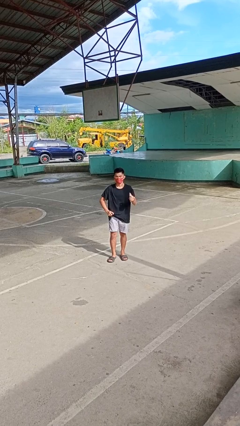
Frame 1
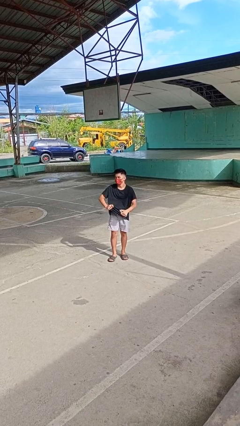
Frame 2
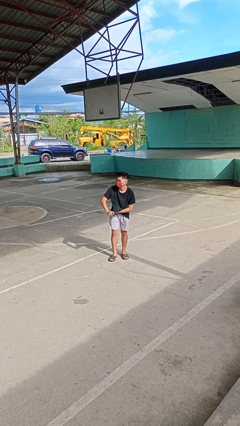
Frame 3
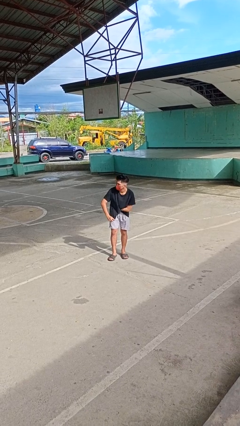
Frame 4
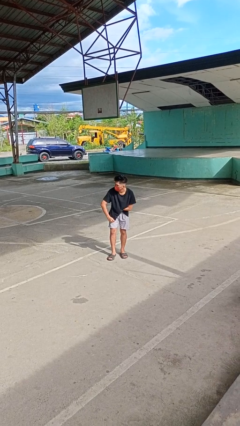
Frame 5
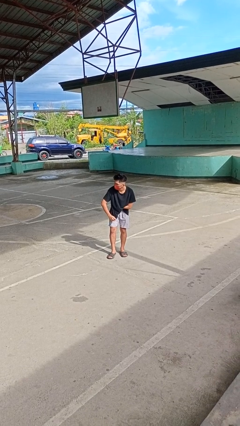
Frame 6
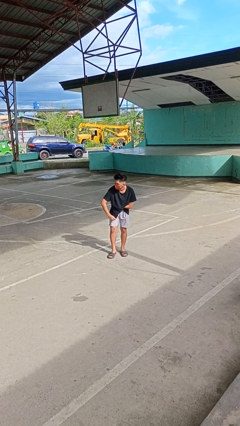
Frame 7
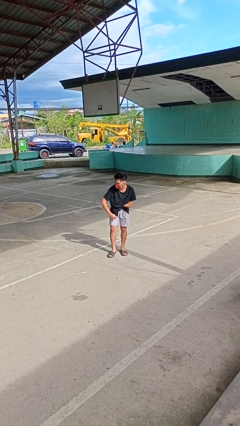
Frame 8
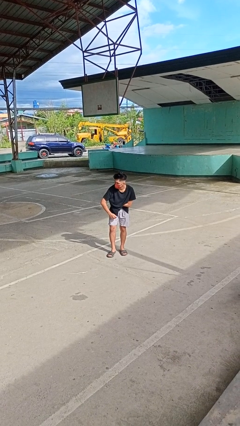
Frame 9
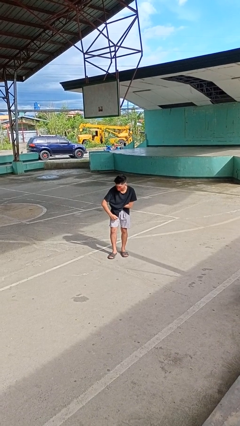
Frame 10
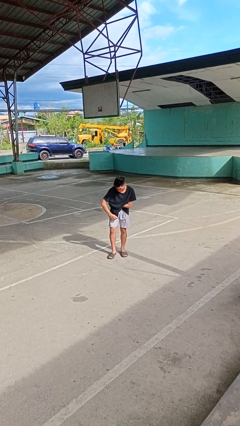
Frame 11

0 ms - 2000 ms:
person applies deodorant

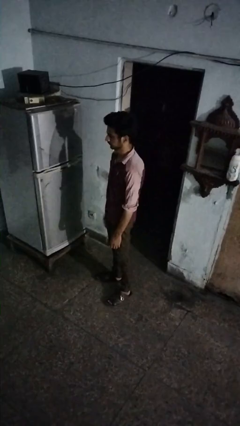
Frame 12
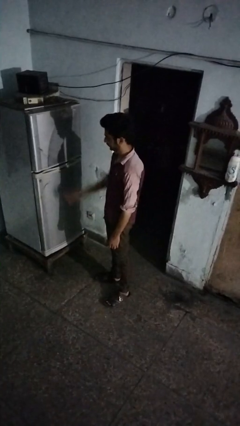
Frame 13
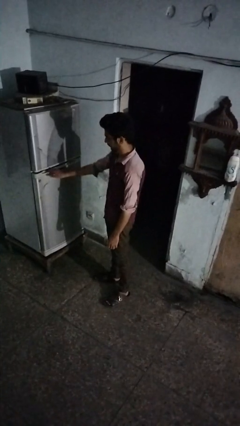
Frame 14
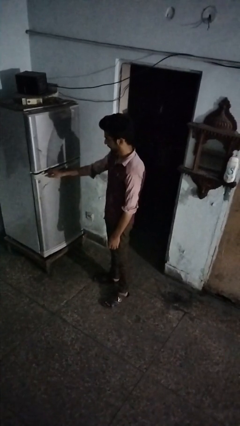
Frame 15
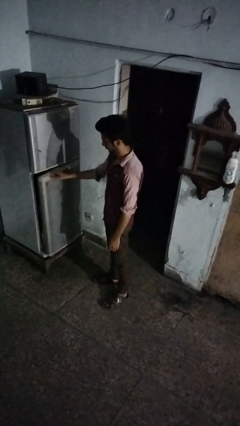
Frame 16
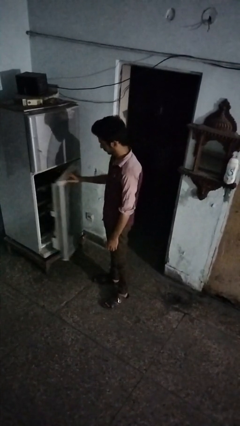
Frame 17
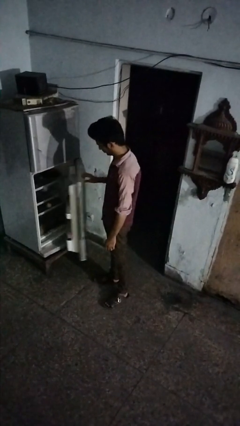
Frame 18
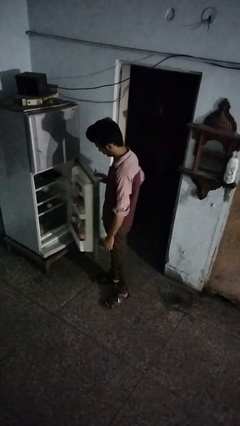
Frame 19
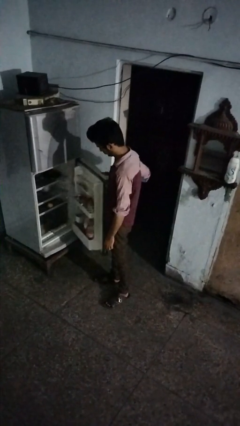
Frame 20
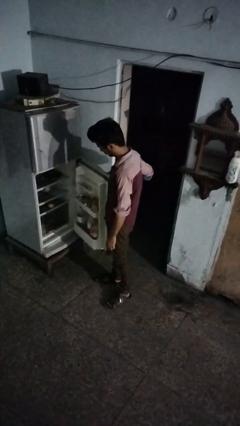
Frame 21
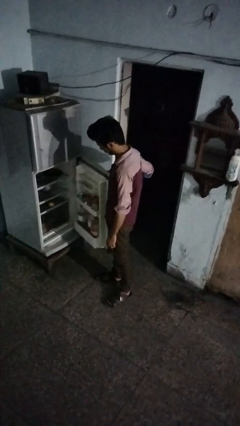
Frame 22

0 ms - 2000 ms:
person opens refrigerator

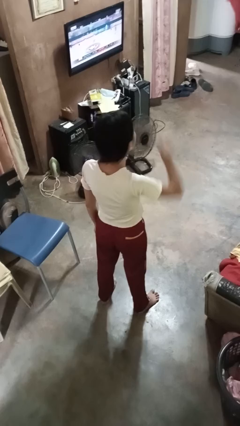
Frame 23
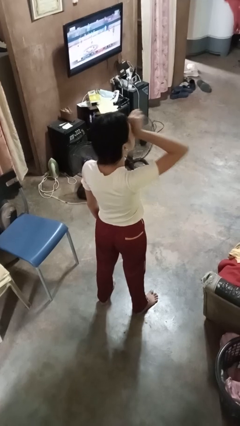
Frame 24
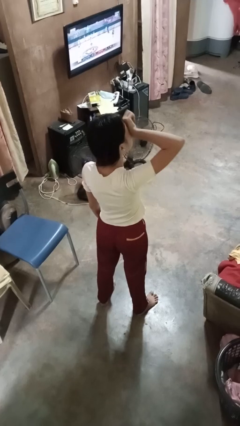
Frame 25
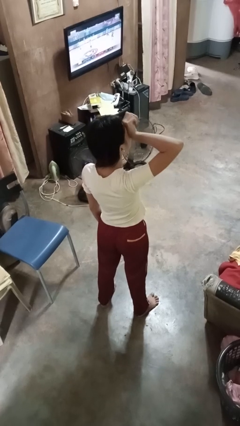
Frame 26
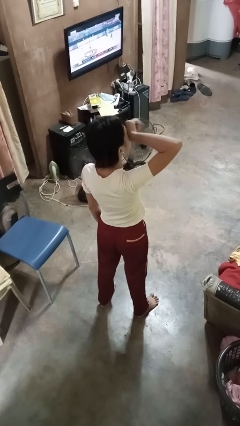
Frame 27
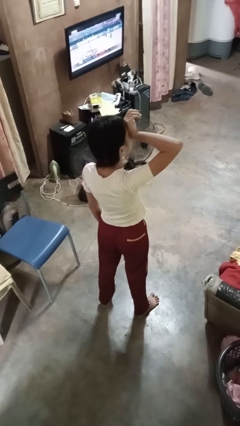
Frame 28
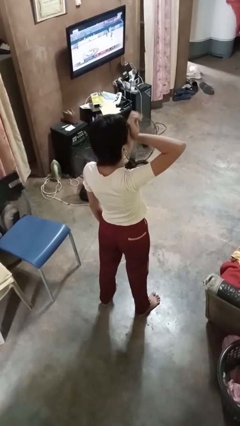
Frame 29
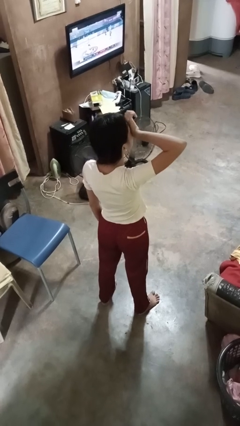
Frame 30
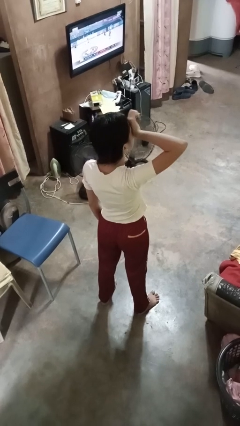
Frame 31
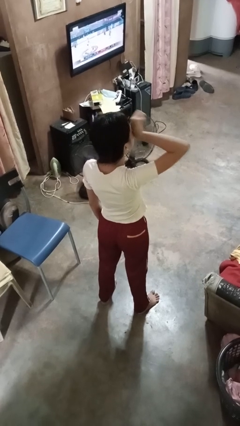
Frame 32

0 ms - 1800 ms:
person rubs eyes

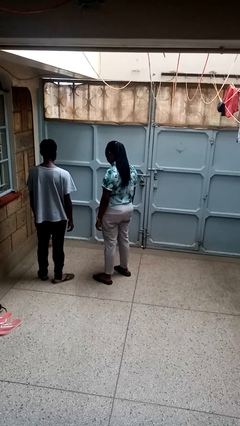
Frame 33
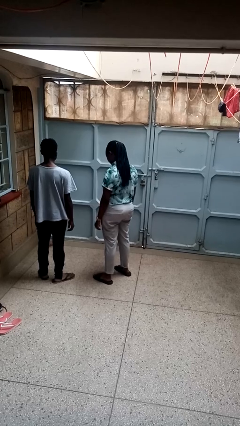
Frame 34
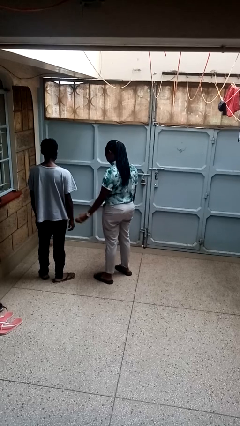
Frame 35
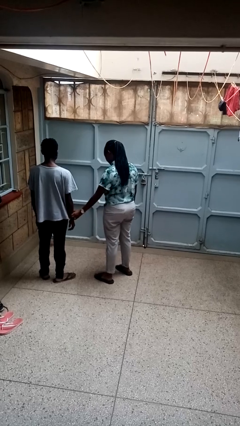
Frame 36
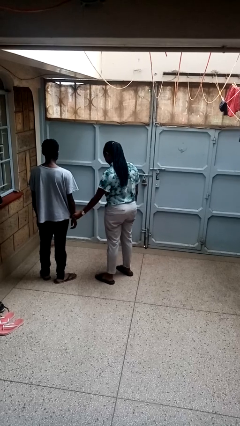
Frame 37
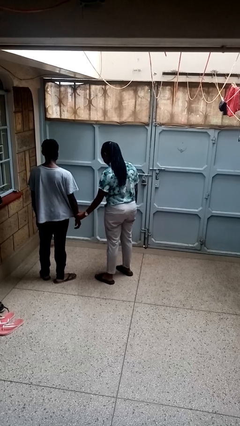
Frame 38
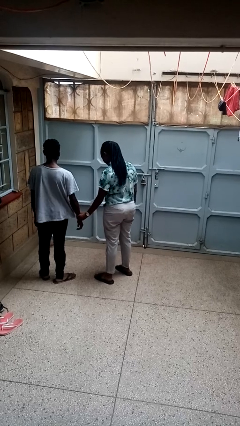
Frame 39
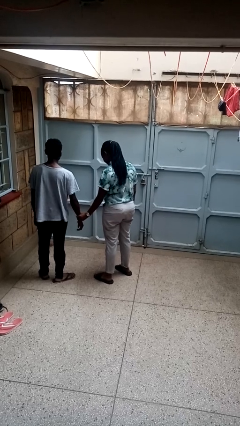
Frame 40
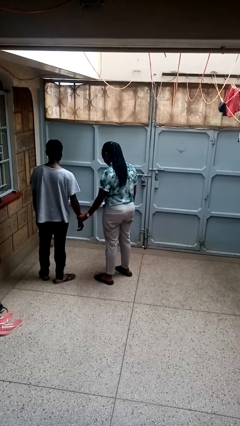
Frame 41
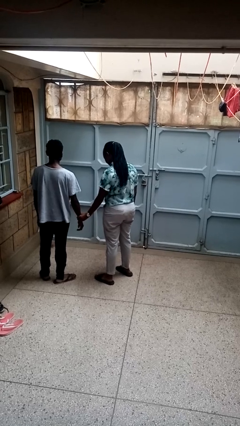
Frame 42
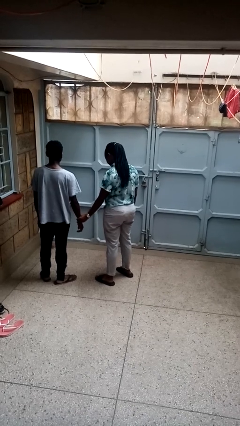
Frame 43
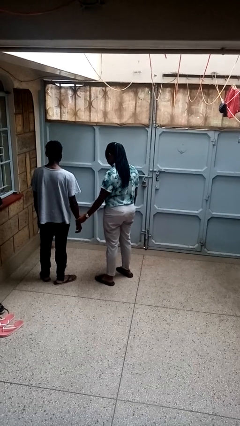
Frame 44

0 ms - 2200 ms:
person grabs person by forearm

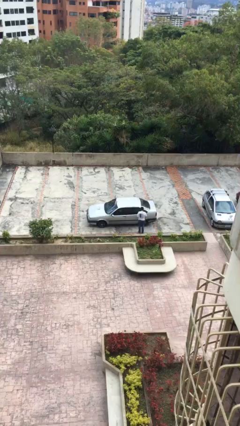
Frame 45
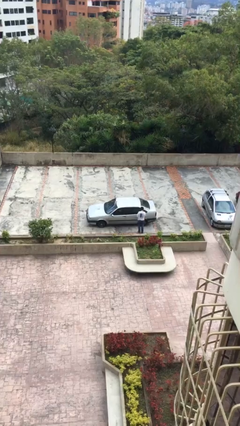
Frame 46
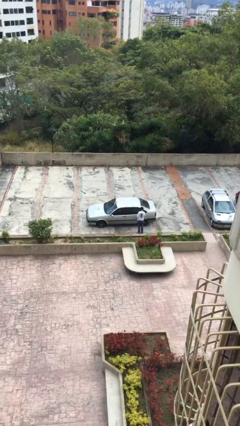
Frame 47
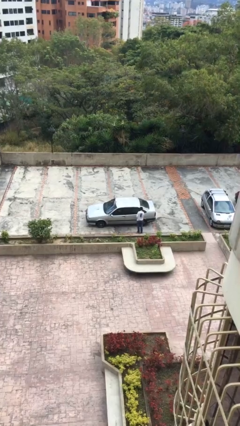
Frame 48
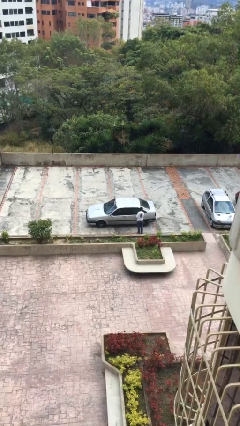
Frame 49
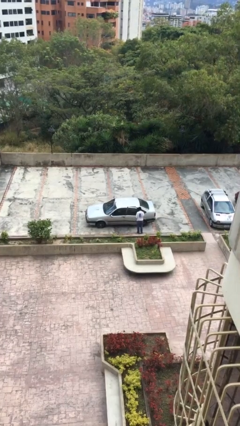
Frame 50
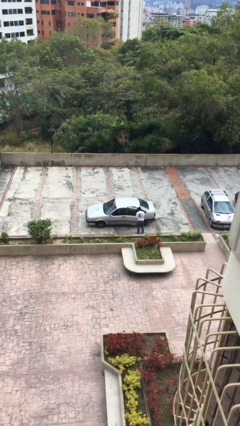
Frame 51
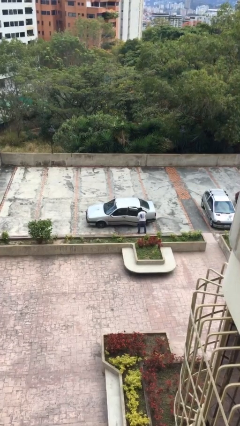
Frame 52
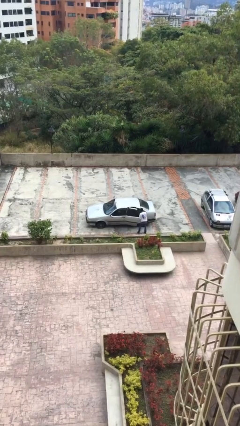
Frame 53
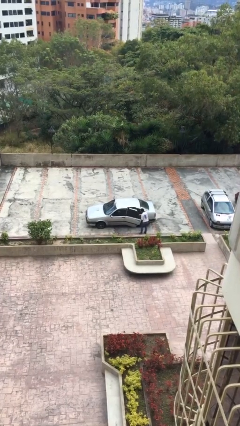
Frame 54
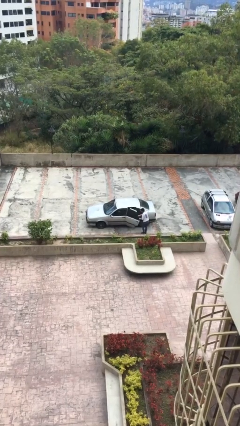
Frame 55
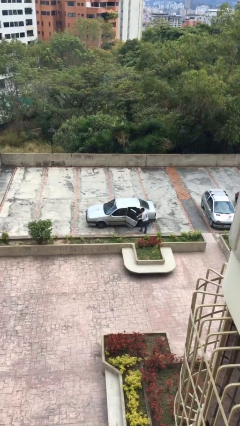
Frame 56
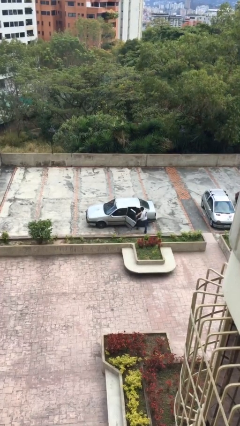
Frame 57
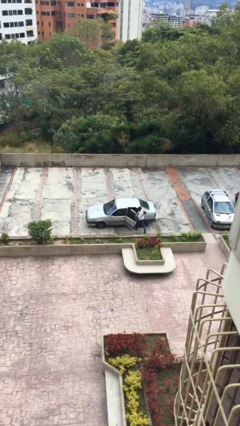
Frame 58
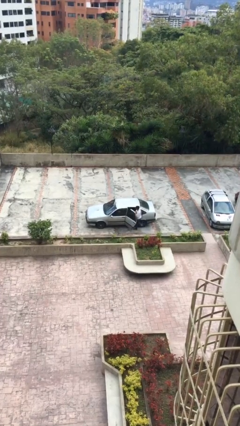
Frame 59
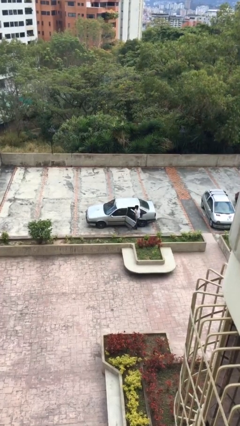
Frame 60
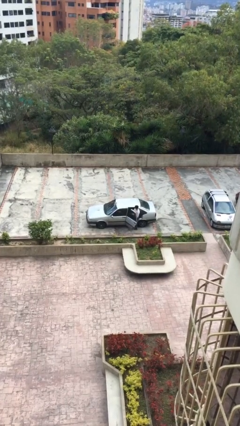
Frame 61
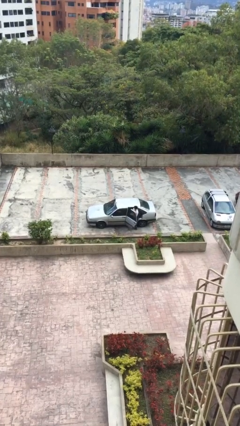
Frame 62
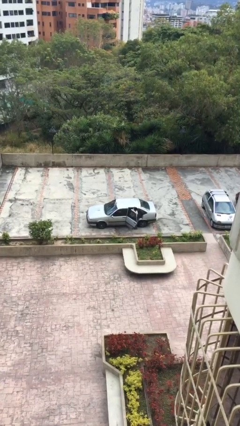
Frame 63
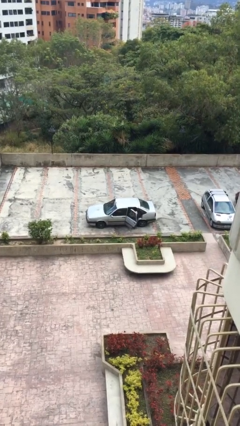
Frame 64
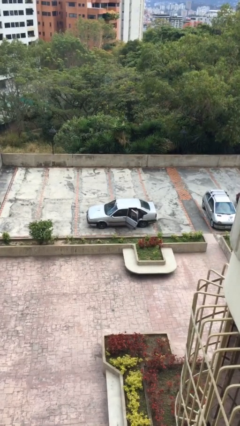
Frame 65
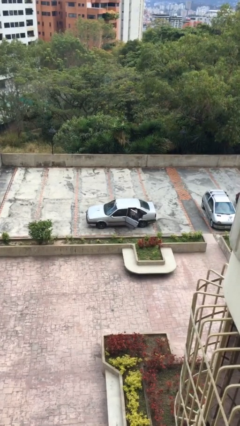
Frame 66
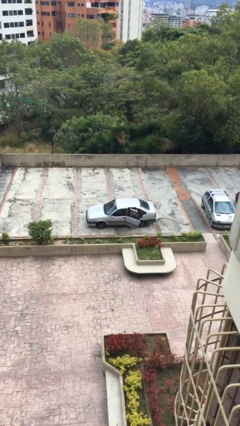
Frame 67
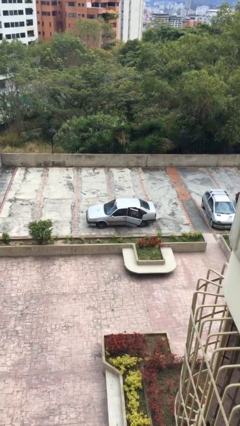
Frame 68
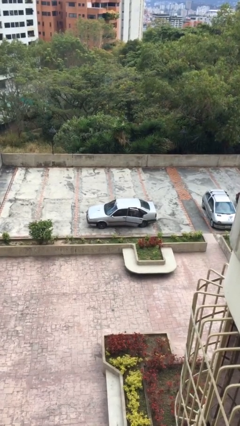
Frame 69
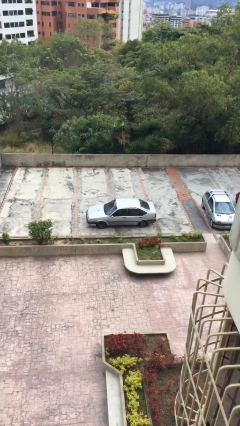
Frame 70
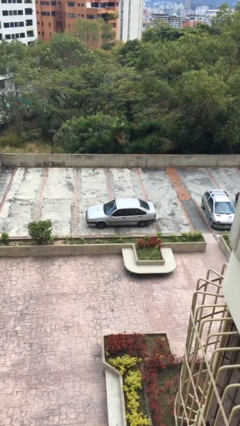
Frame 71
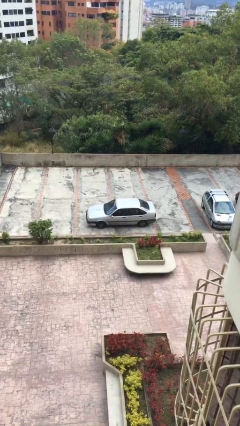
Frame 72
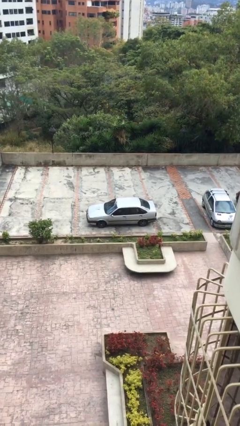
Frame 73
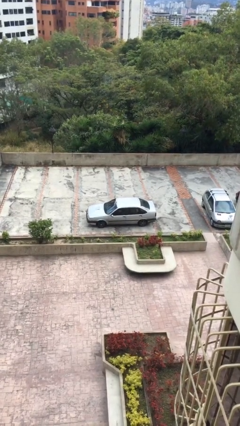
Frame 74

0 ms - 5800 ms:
car picks up person

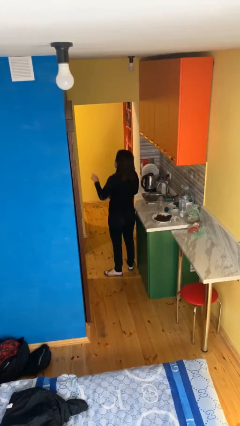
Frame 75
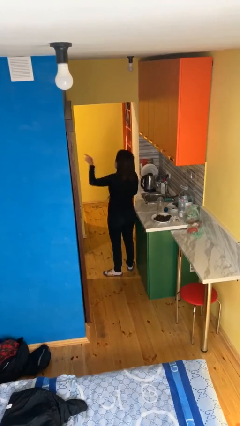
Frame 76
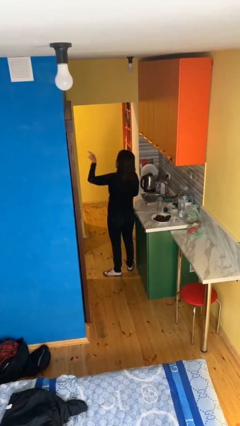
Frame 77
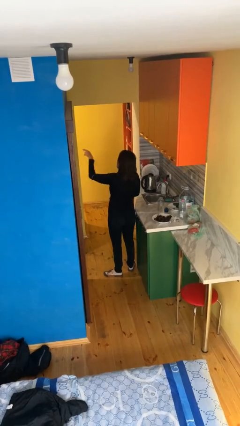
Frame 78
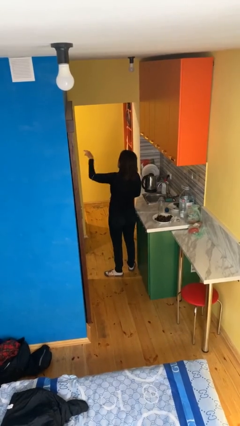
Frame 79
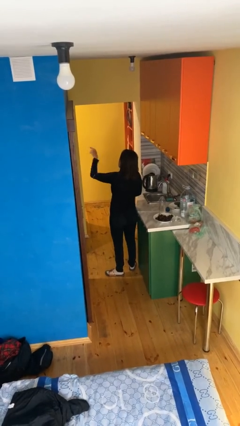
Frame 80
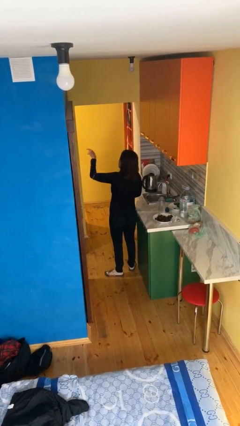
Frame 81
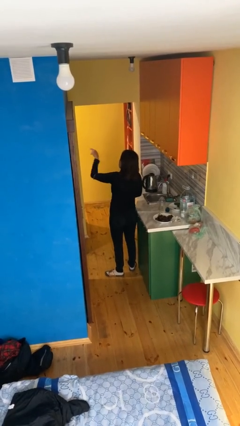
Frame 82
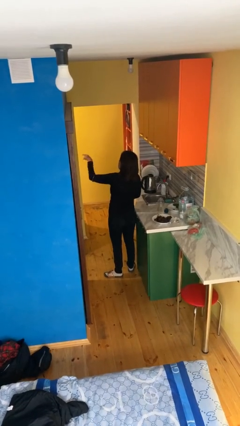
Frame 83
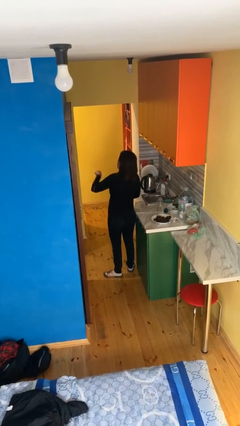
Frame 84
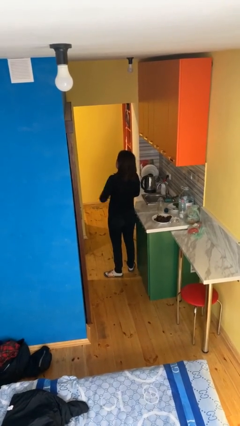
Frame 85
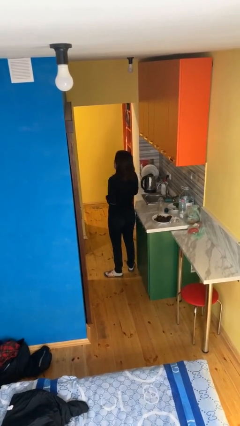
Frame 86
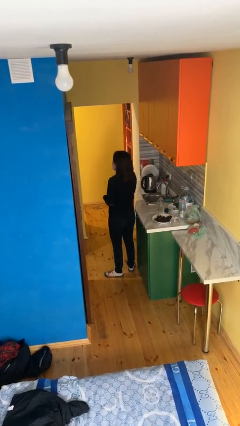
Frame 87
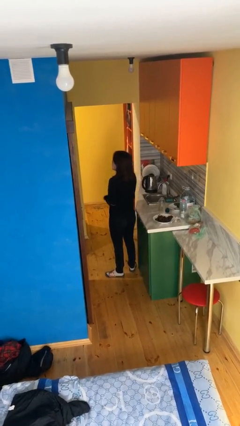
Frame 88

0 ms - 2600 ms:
person points at person

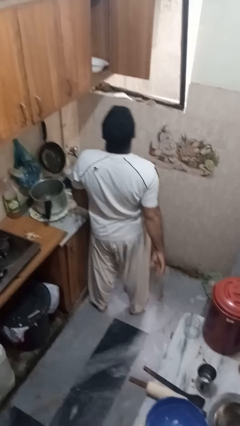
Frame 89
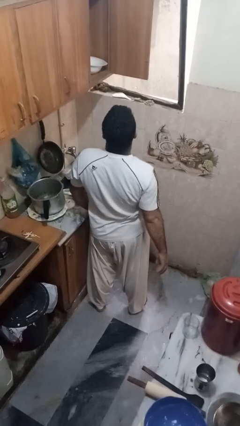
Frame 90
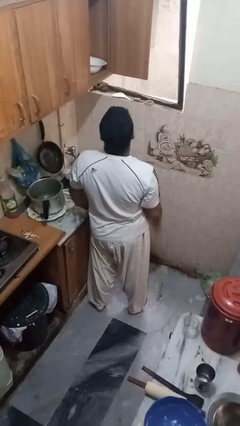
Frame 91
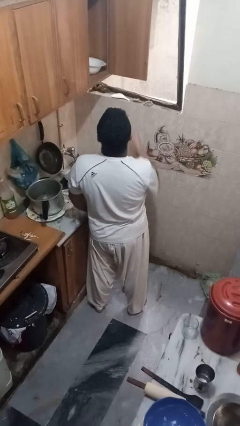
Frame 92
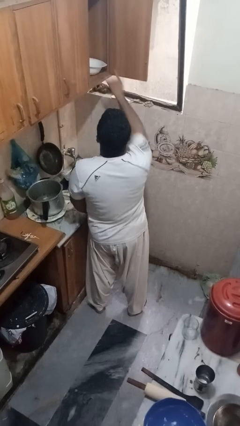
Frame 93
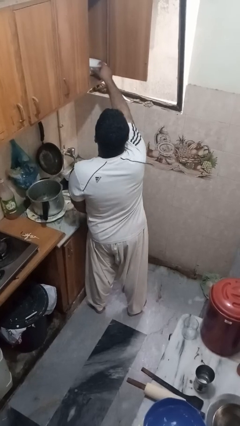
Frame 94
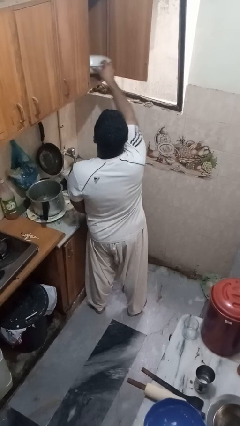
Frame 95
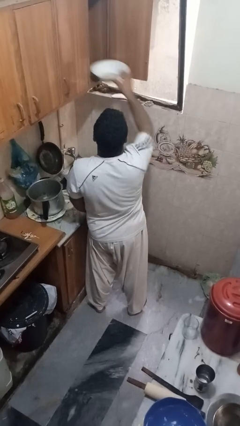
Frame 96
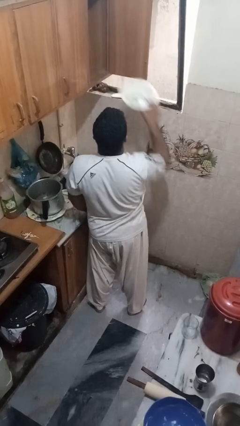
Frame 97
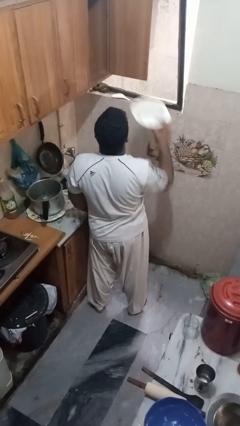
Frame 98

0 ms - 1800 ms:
person takes object from cabinet
